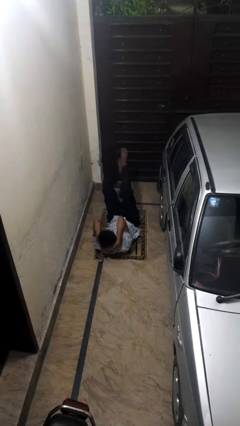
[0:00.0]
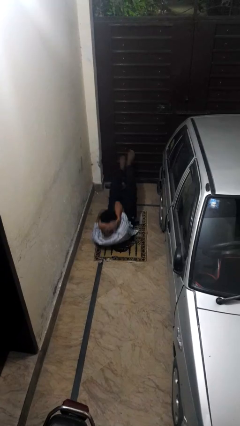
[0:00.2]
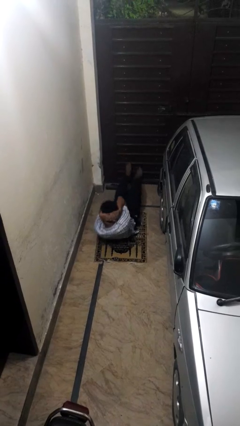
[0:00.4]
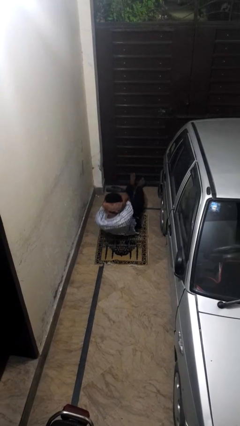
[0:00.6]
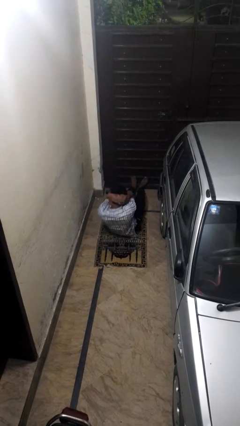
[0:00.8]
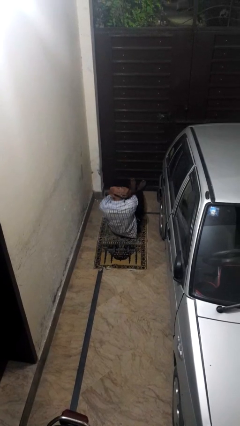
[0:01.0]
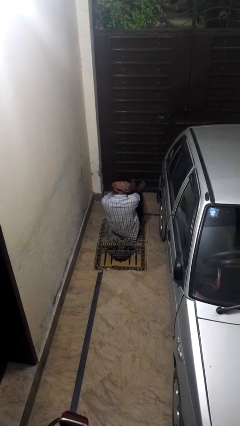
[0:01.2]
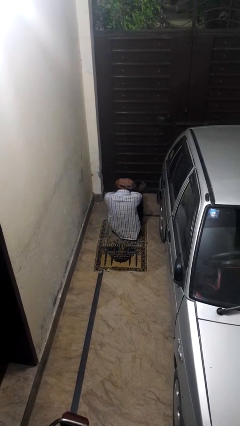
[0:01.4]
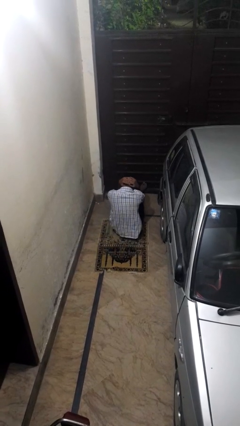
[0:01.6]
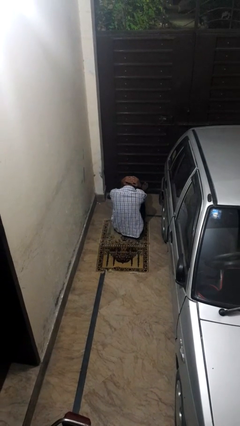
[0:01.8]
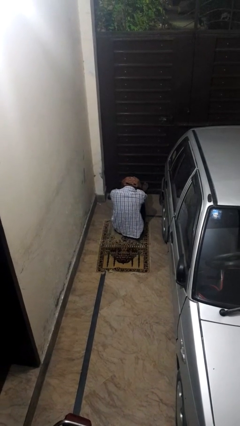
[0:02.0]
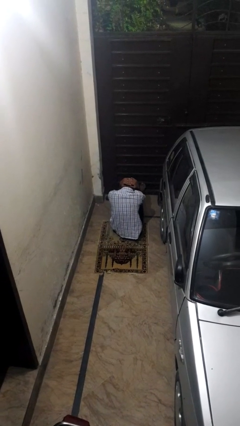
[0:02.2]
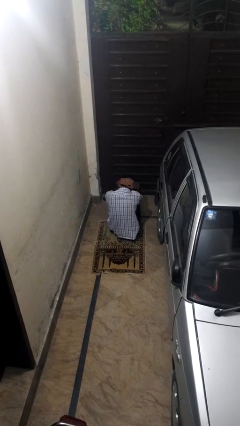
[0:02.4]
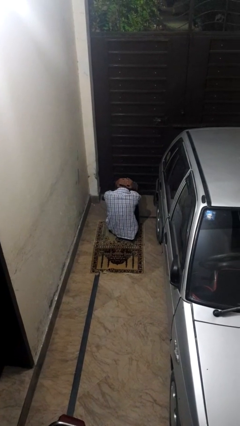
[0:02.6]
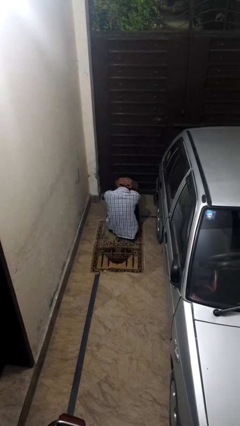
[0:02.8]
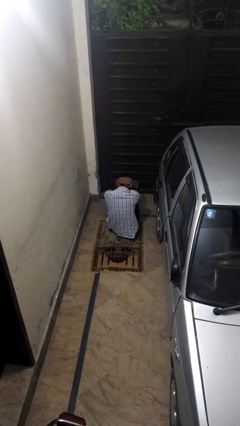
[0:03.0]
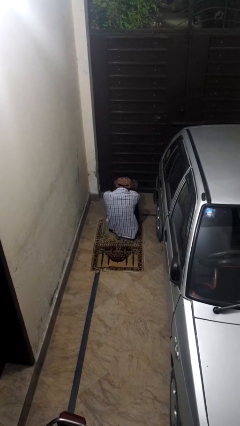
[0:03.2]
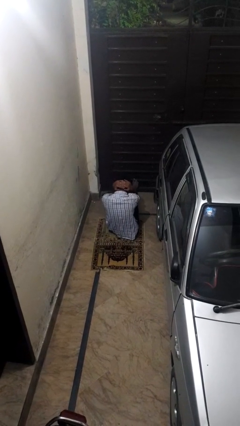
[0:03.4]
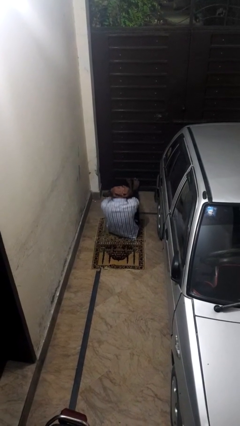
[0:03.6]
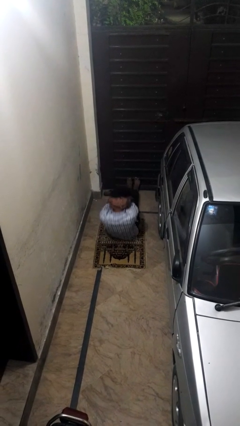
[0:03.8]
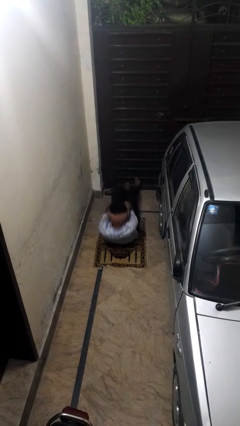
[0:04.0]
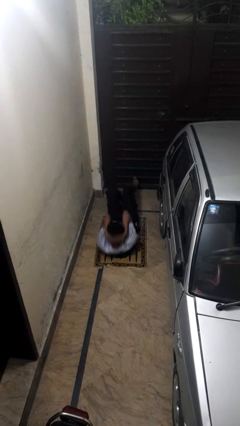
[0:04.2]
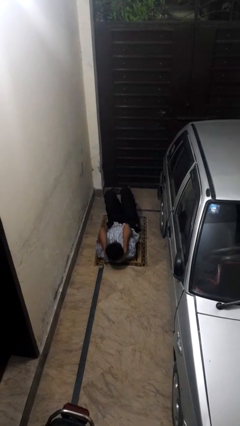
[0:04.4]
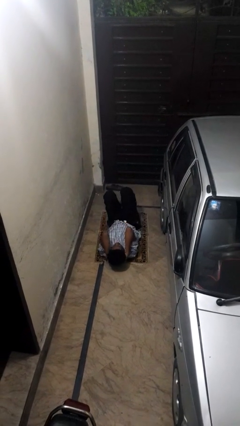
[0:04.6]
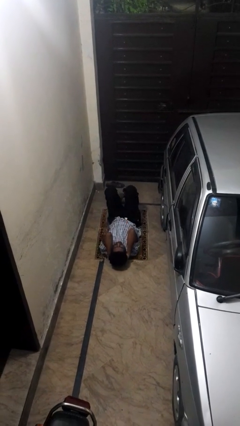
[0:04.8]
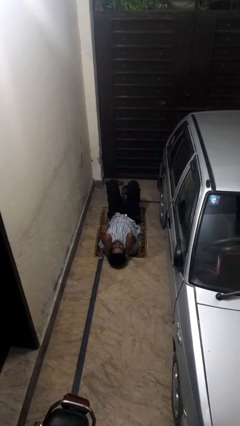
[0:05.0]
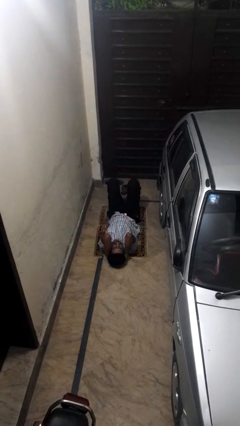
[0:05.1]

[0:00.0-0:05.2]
person exercises with situp

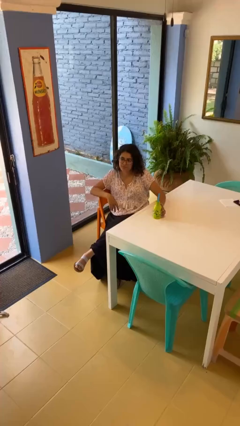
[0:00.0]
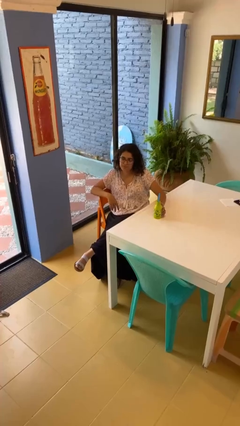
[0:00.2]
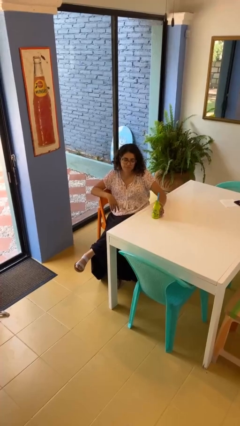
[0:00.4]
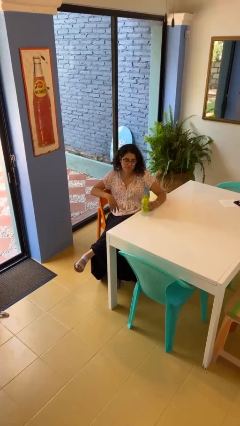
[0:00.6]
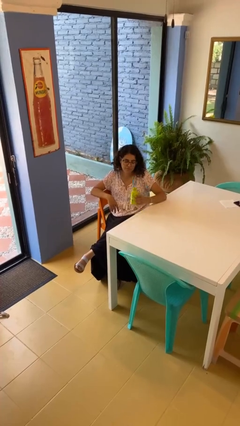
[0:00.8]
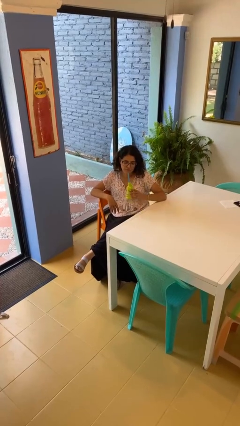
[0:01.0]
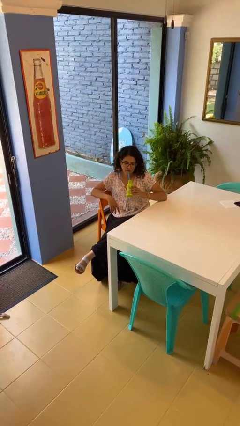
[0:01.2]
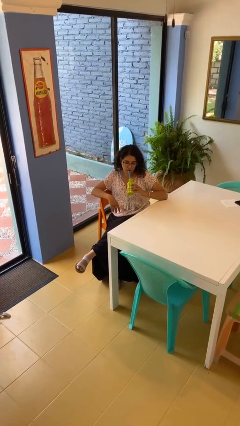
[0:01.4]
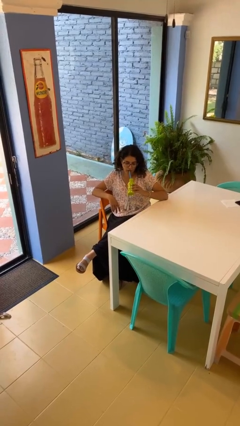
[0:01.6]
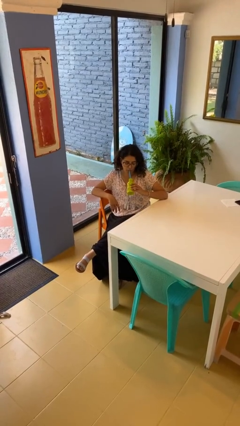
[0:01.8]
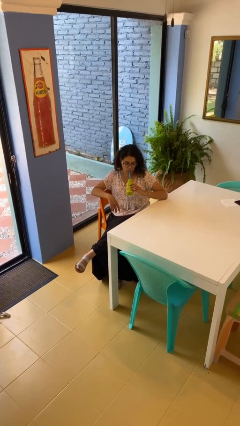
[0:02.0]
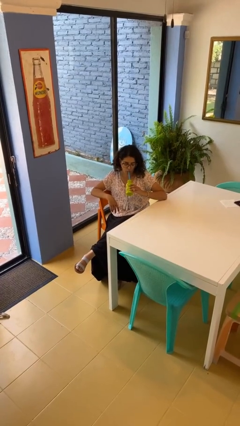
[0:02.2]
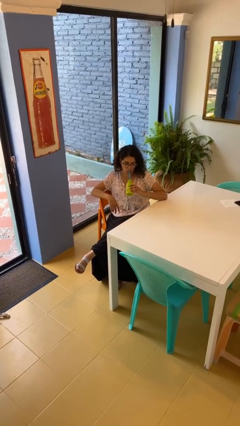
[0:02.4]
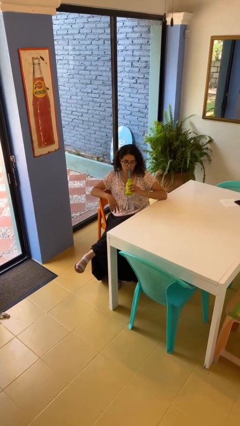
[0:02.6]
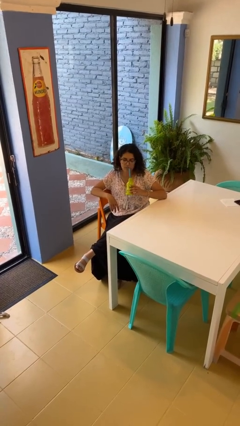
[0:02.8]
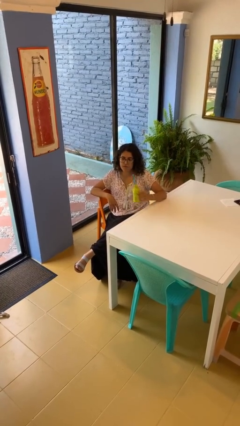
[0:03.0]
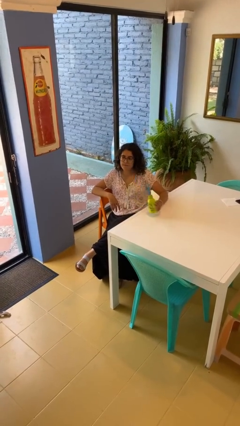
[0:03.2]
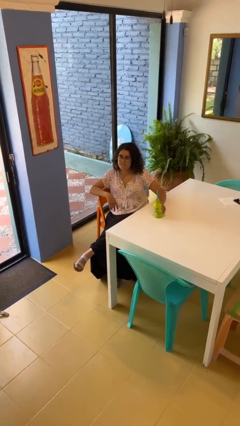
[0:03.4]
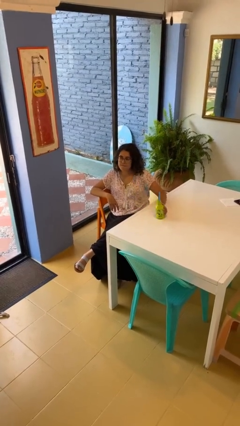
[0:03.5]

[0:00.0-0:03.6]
person drinks from straw

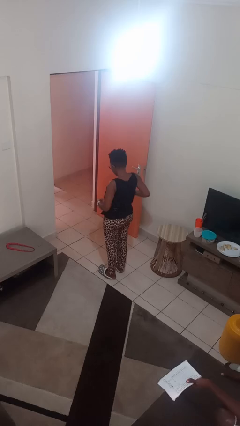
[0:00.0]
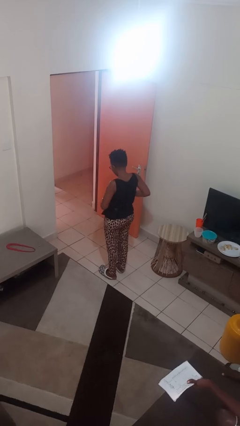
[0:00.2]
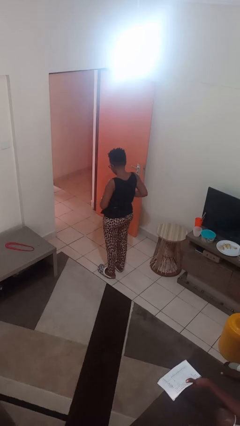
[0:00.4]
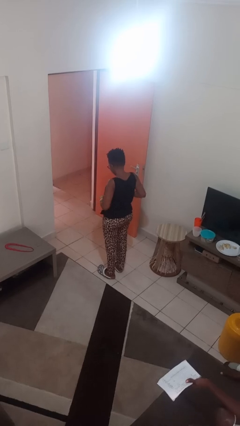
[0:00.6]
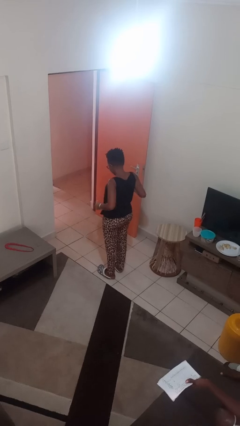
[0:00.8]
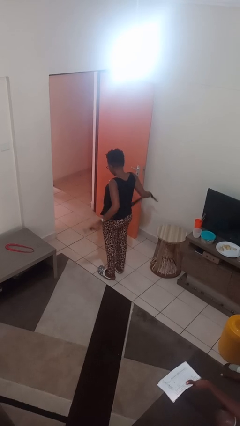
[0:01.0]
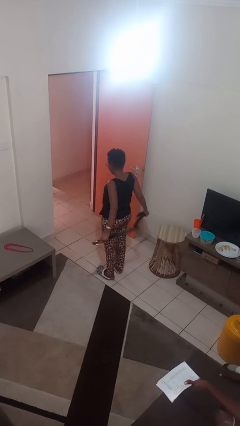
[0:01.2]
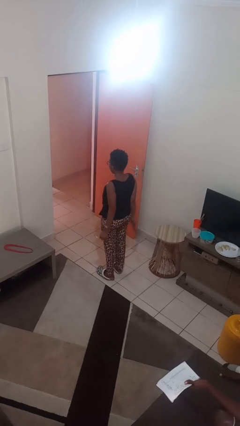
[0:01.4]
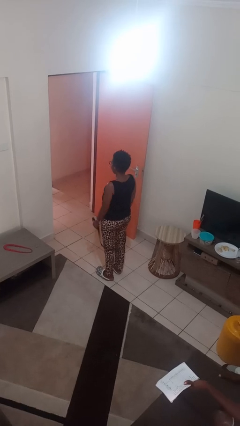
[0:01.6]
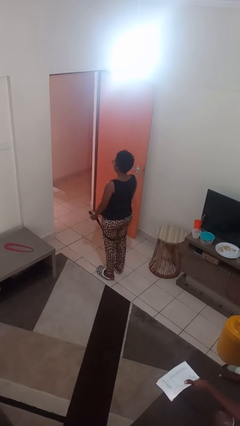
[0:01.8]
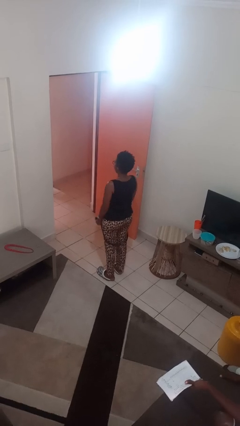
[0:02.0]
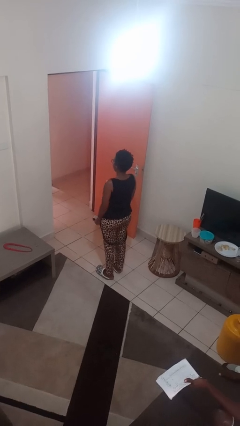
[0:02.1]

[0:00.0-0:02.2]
person takes off belt

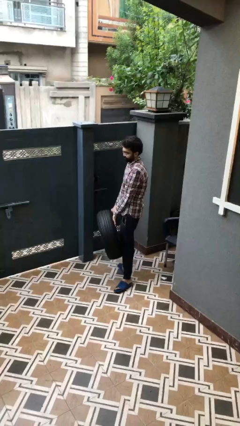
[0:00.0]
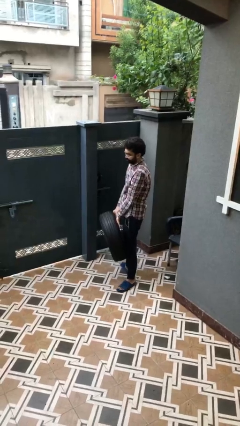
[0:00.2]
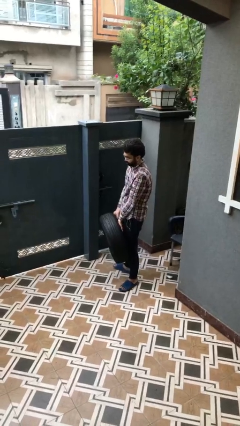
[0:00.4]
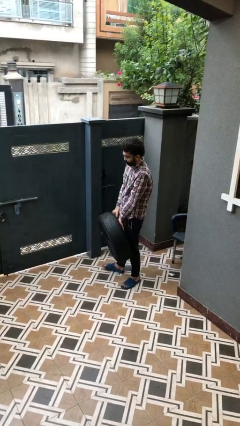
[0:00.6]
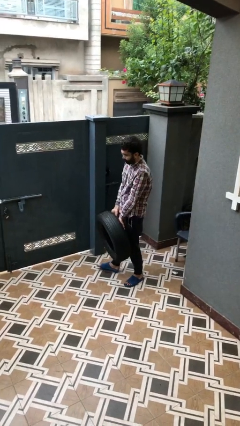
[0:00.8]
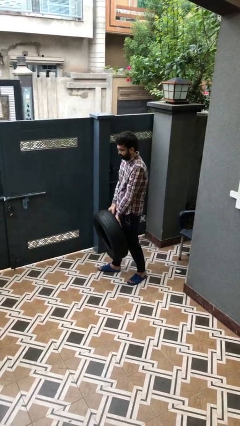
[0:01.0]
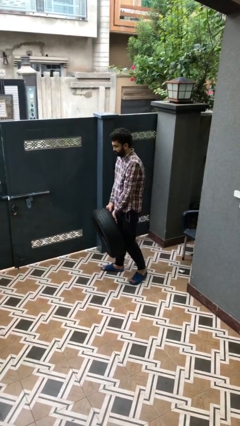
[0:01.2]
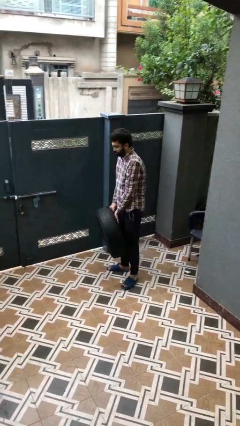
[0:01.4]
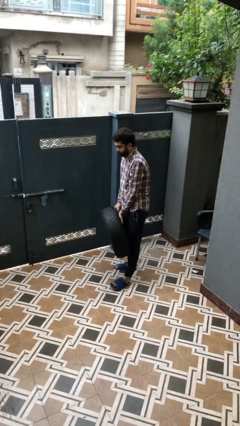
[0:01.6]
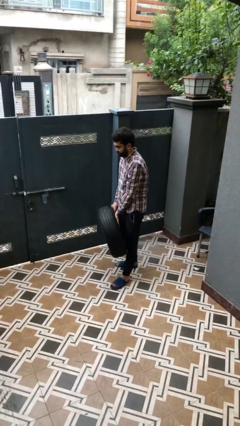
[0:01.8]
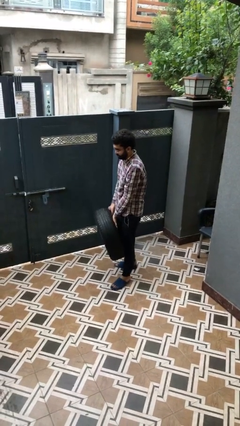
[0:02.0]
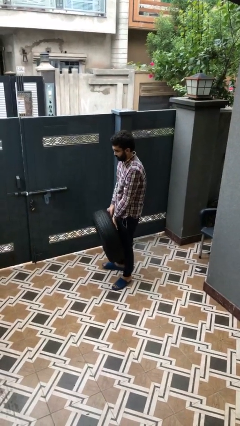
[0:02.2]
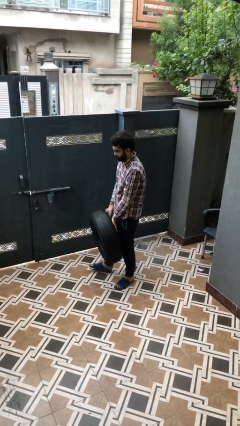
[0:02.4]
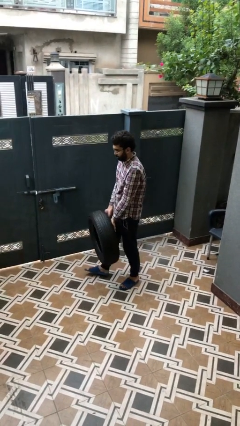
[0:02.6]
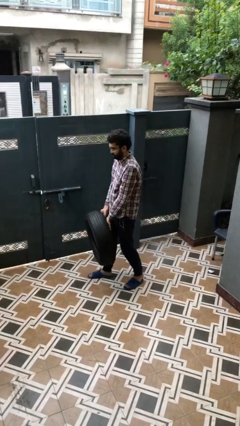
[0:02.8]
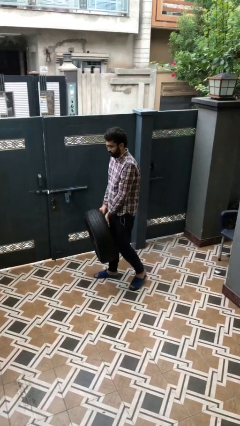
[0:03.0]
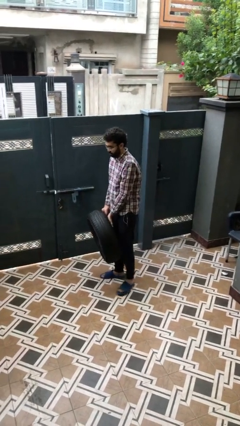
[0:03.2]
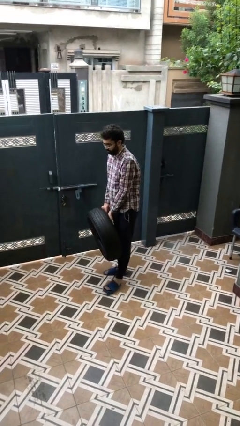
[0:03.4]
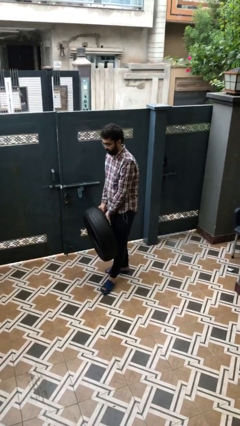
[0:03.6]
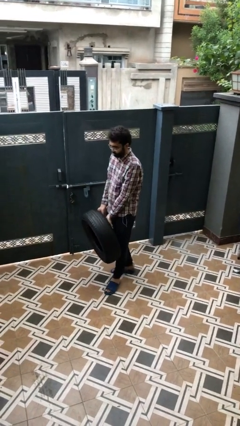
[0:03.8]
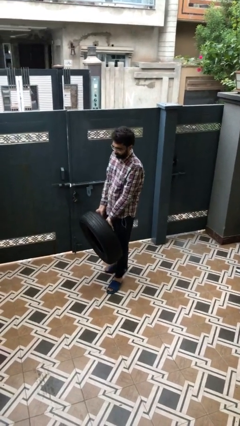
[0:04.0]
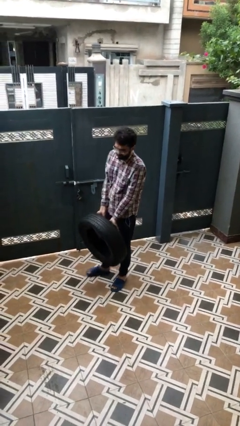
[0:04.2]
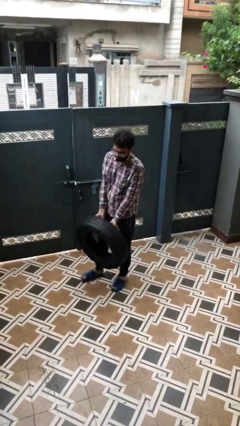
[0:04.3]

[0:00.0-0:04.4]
person carries heavy object

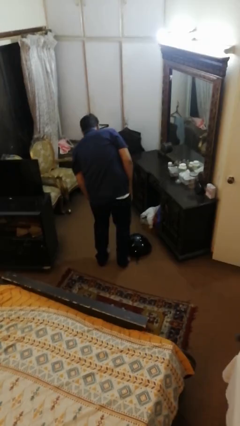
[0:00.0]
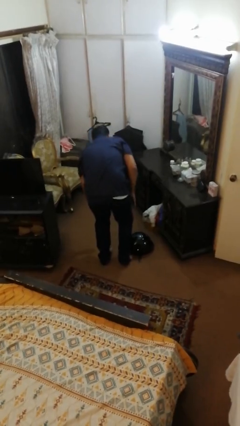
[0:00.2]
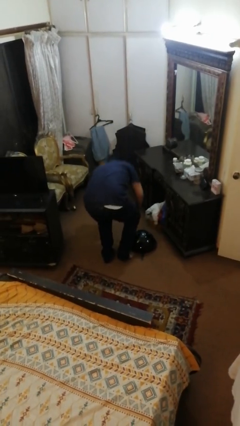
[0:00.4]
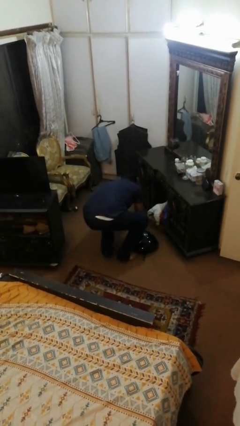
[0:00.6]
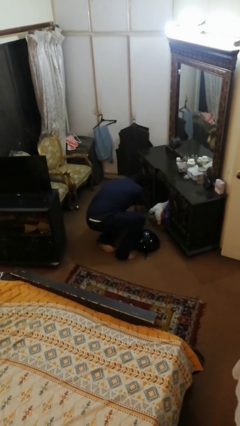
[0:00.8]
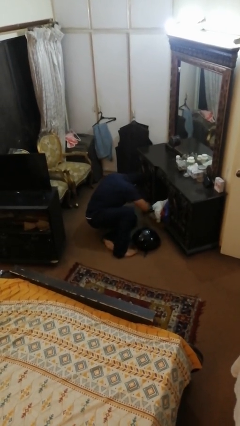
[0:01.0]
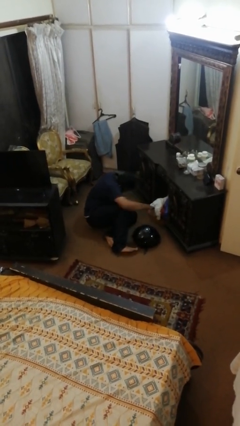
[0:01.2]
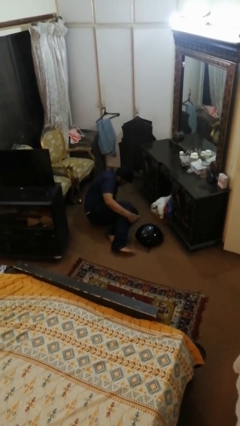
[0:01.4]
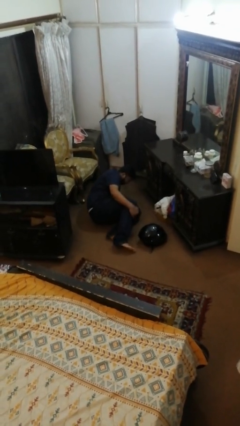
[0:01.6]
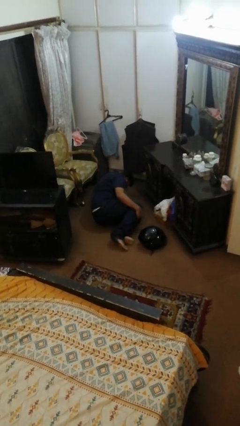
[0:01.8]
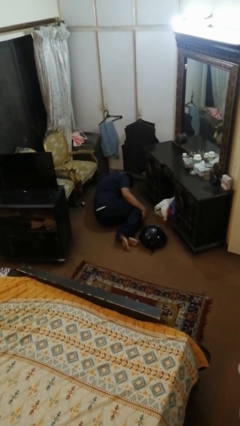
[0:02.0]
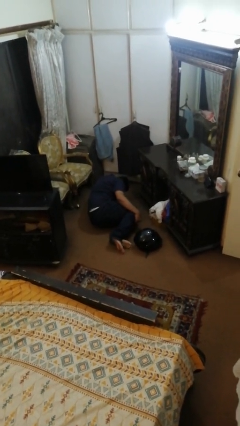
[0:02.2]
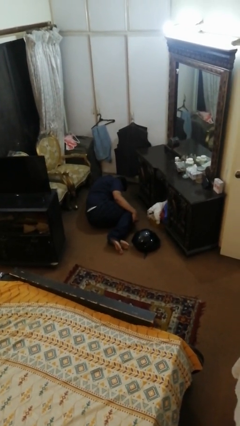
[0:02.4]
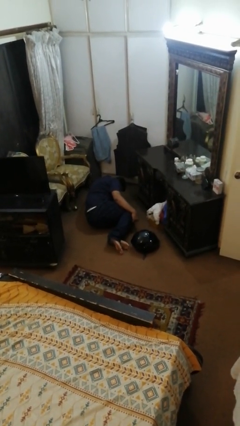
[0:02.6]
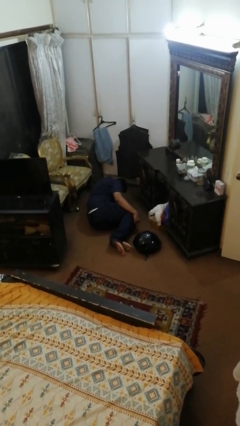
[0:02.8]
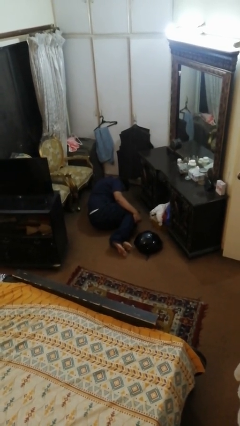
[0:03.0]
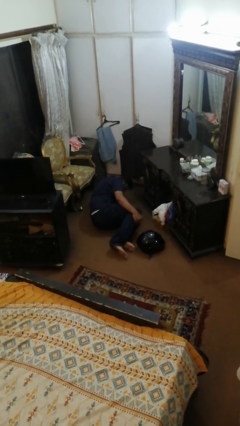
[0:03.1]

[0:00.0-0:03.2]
person lies down on floor
